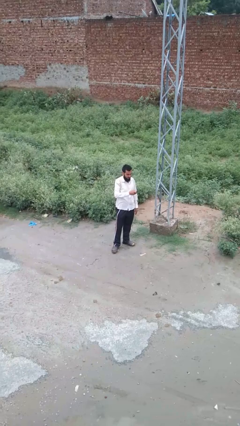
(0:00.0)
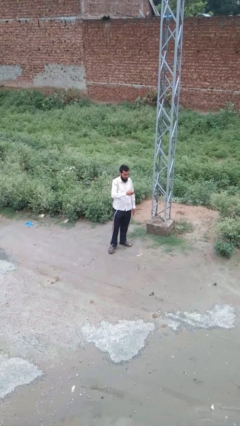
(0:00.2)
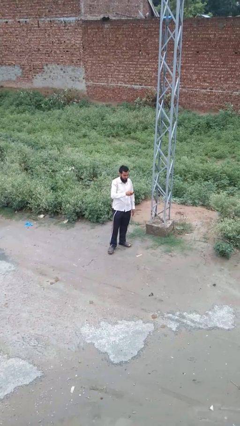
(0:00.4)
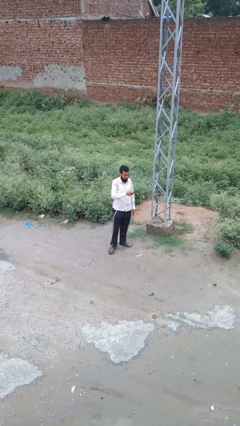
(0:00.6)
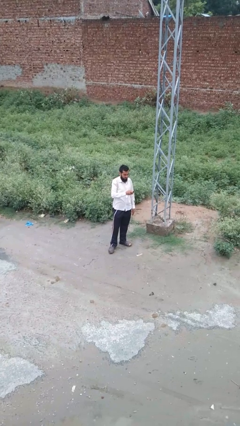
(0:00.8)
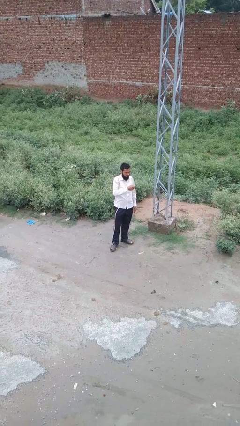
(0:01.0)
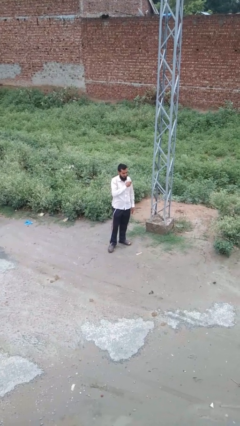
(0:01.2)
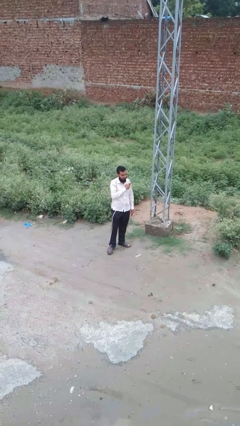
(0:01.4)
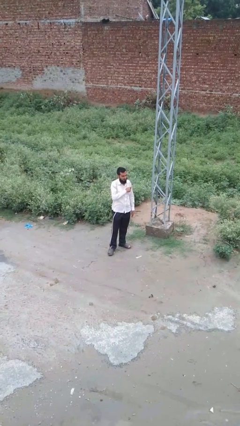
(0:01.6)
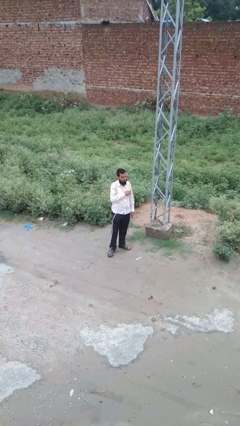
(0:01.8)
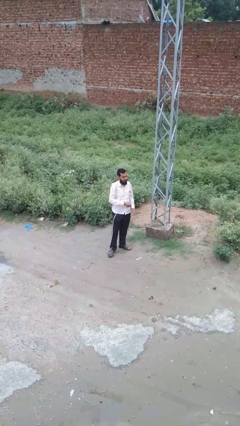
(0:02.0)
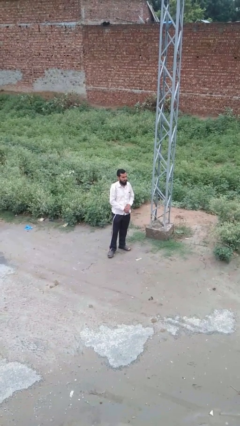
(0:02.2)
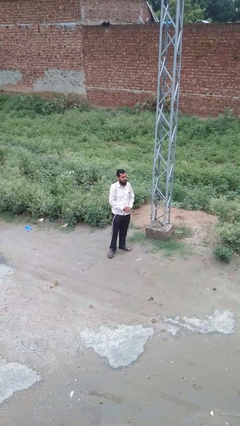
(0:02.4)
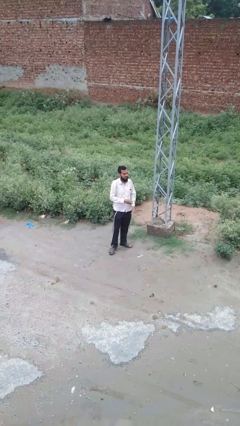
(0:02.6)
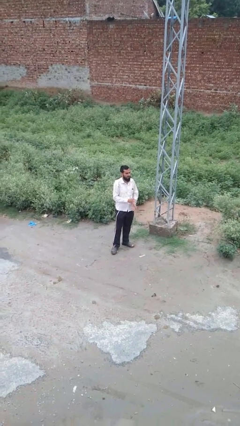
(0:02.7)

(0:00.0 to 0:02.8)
person puts phone into pocket

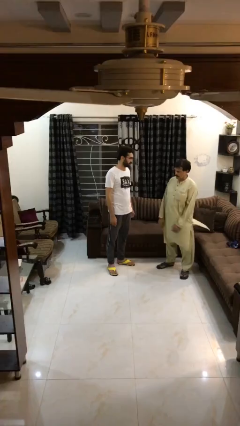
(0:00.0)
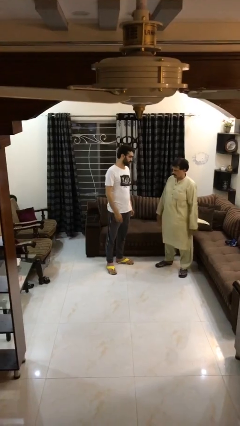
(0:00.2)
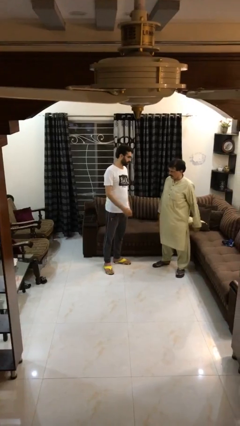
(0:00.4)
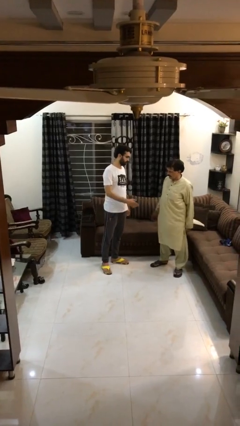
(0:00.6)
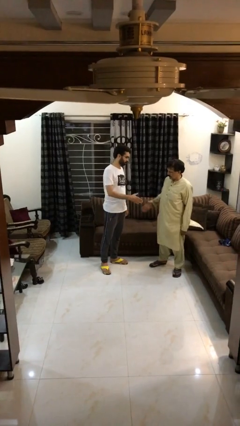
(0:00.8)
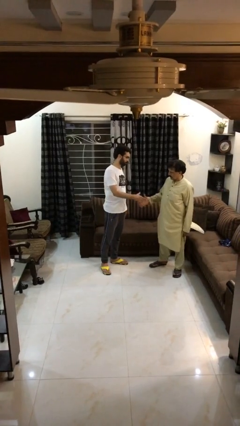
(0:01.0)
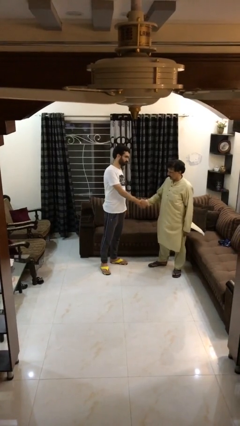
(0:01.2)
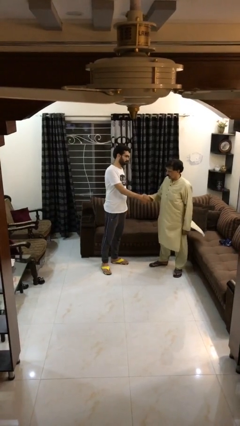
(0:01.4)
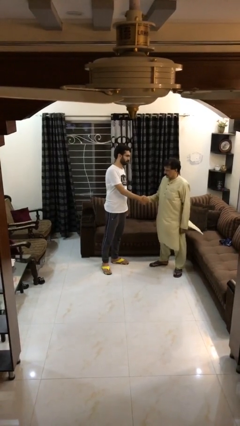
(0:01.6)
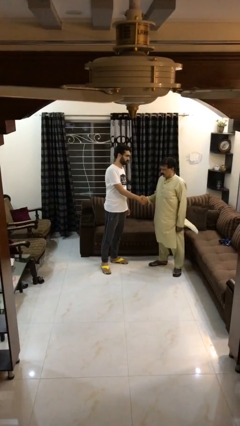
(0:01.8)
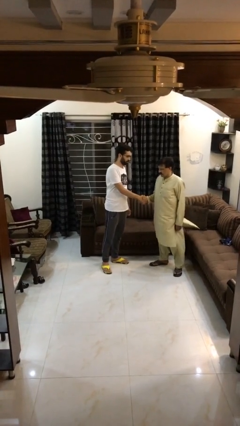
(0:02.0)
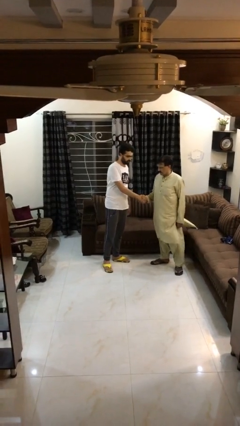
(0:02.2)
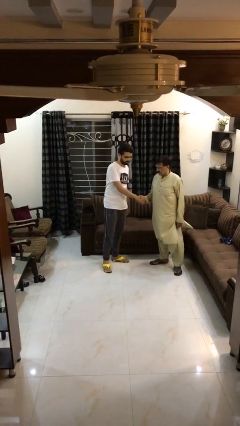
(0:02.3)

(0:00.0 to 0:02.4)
person shakes hand

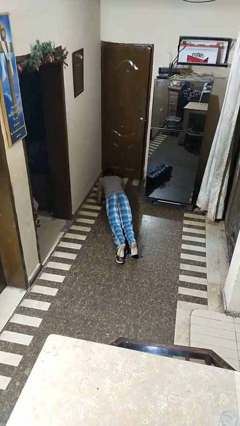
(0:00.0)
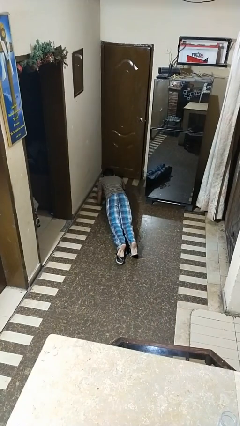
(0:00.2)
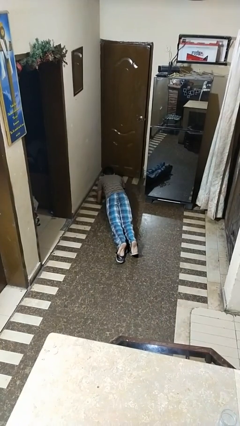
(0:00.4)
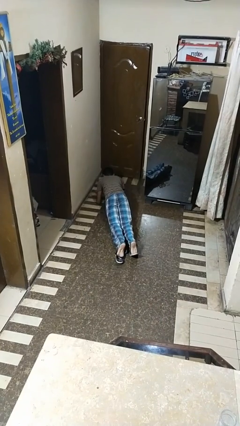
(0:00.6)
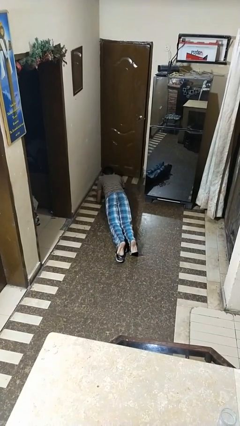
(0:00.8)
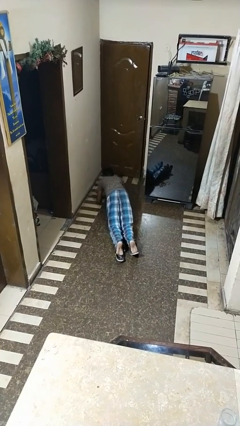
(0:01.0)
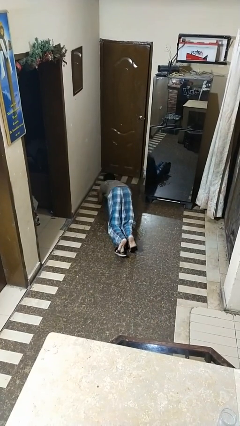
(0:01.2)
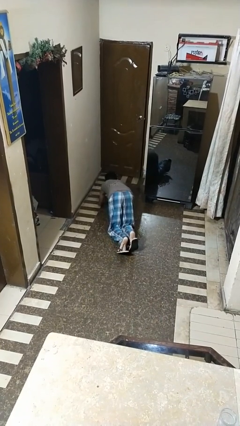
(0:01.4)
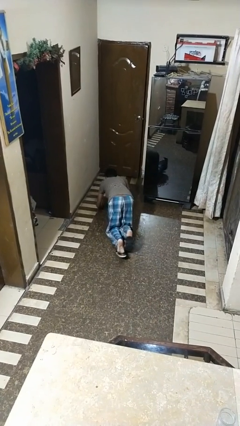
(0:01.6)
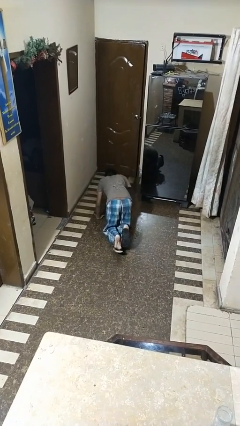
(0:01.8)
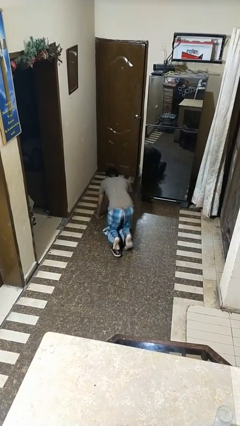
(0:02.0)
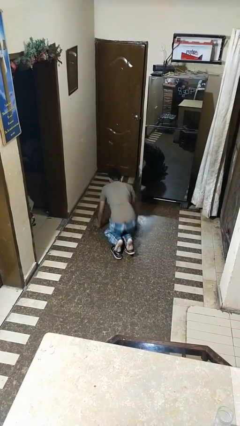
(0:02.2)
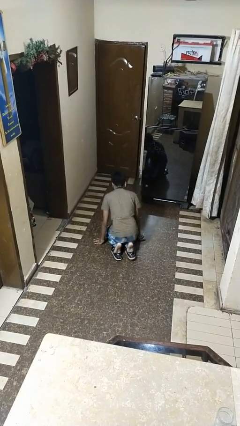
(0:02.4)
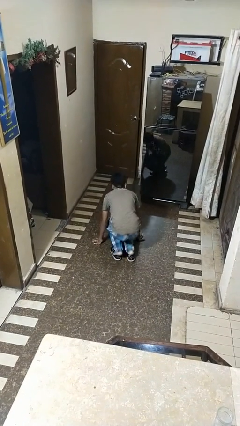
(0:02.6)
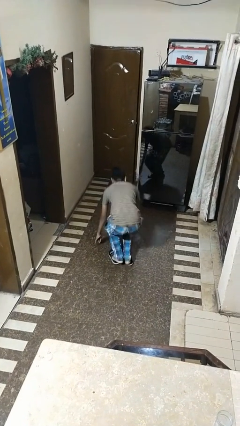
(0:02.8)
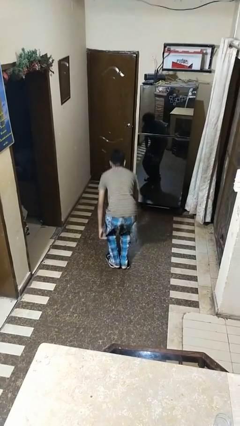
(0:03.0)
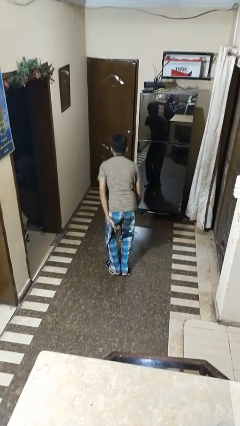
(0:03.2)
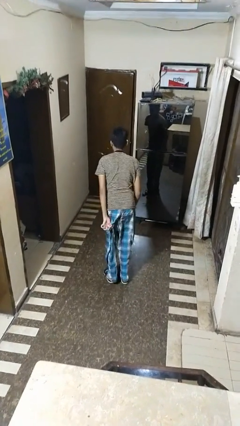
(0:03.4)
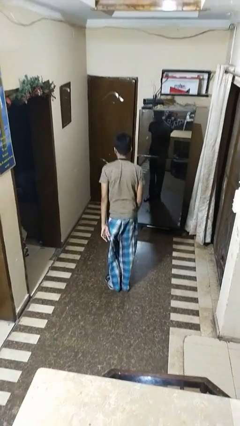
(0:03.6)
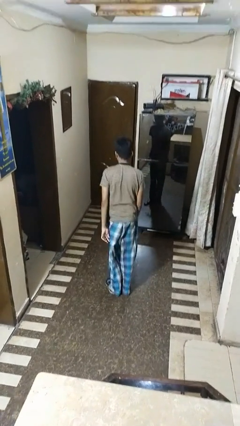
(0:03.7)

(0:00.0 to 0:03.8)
person stands up from floor

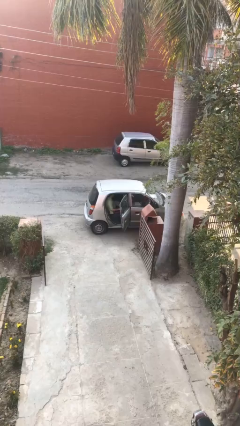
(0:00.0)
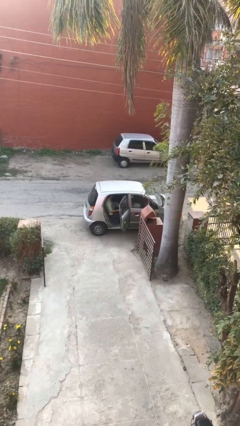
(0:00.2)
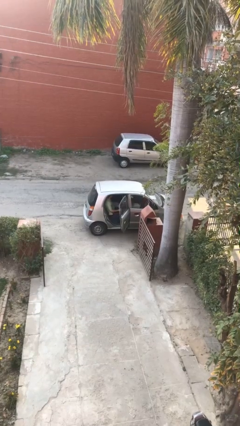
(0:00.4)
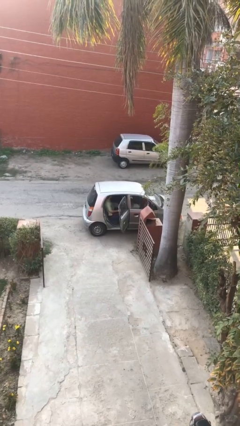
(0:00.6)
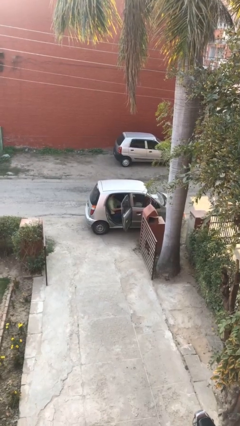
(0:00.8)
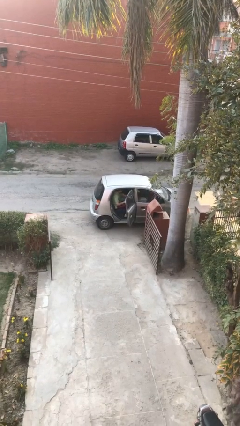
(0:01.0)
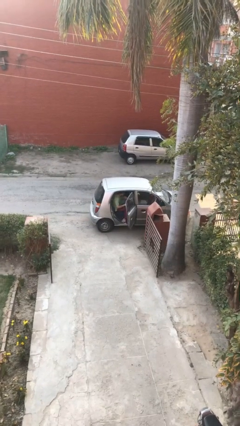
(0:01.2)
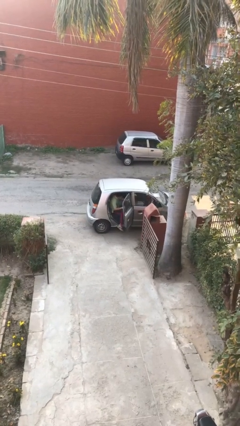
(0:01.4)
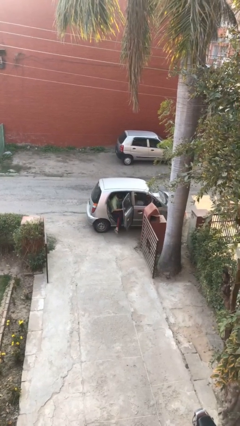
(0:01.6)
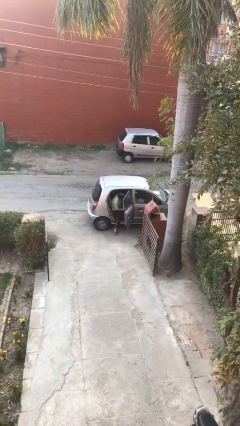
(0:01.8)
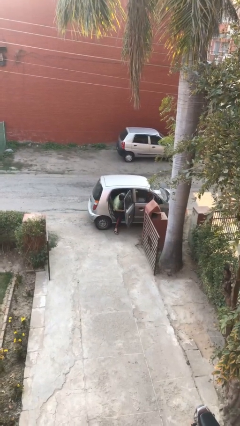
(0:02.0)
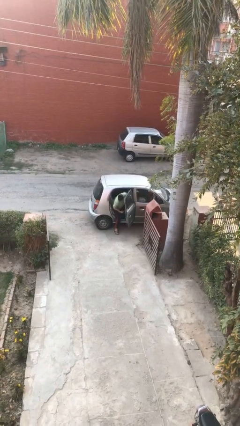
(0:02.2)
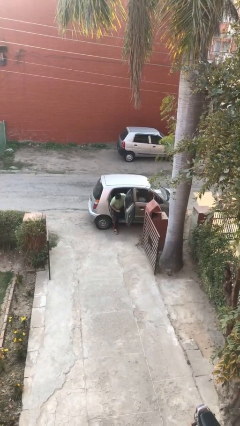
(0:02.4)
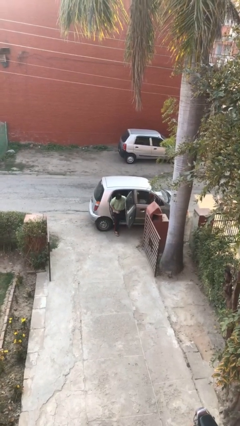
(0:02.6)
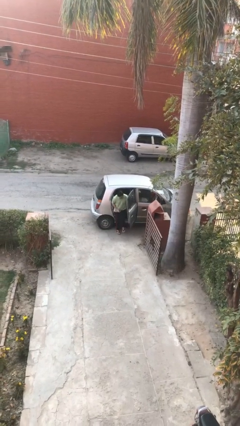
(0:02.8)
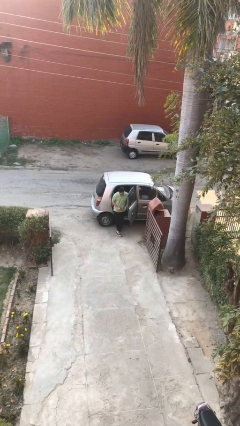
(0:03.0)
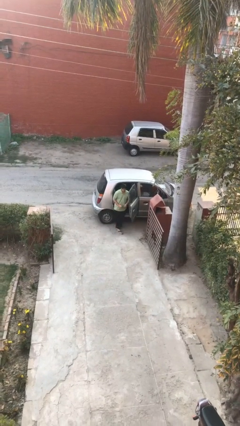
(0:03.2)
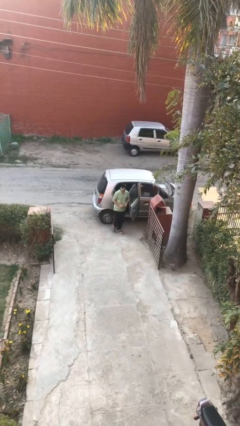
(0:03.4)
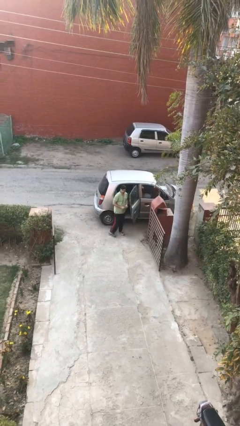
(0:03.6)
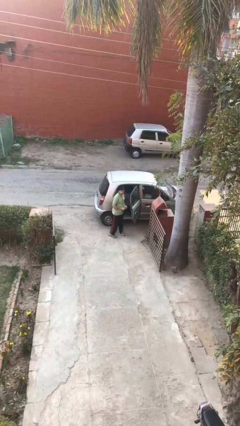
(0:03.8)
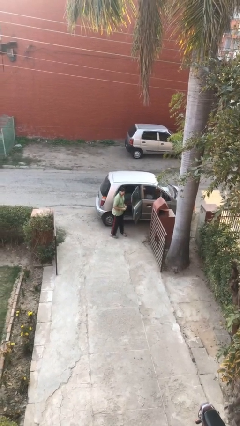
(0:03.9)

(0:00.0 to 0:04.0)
person exits car

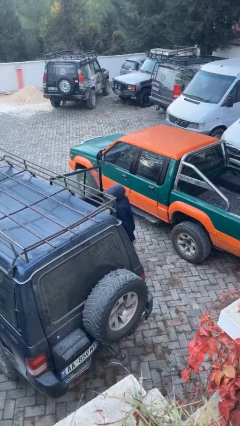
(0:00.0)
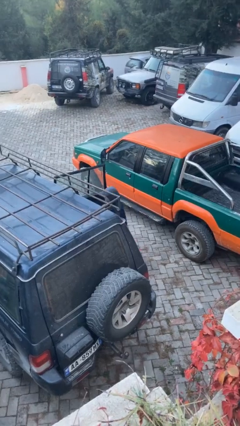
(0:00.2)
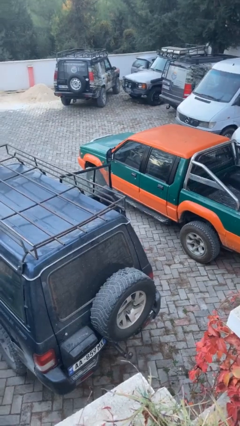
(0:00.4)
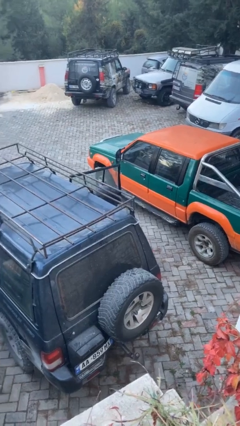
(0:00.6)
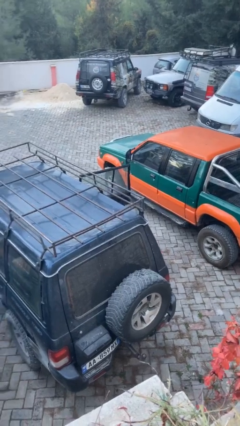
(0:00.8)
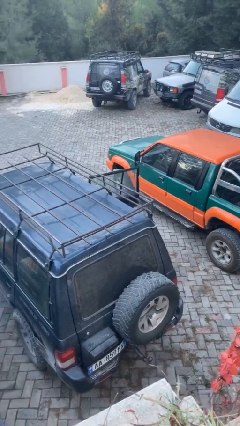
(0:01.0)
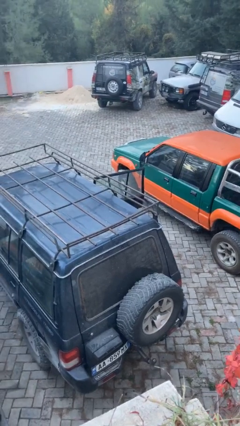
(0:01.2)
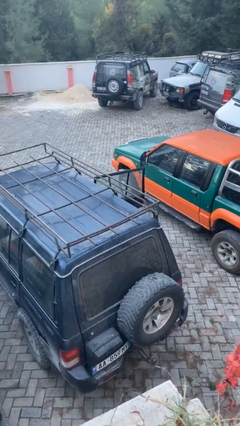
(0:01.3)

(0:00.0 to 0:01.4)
person enters car

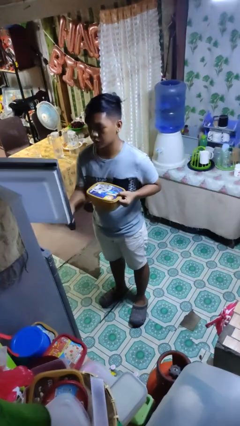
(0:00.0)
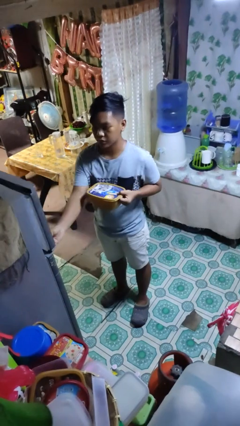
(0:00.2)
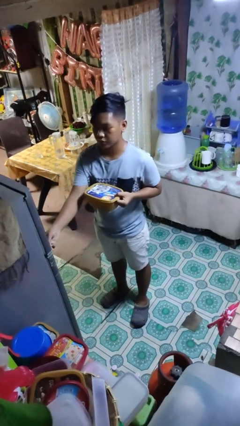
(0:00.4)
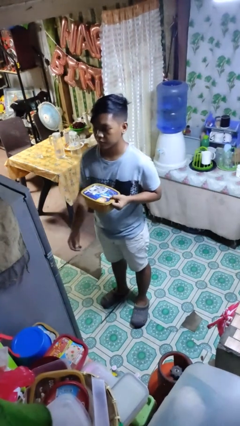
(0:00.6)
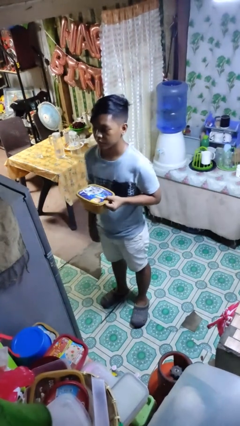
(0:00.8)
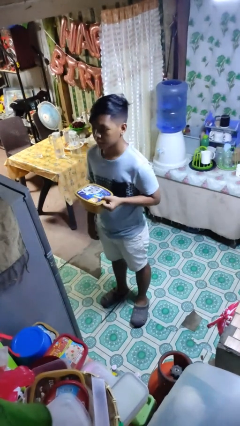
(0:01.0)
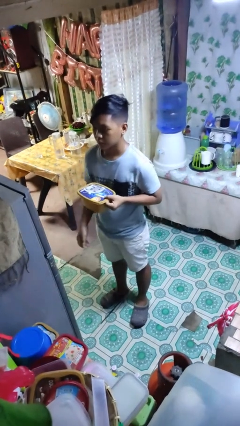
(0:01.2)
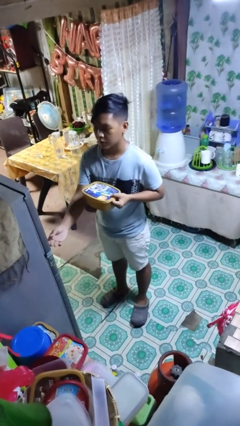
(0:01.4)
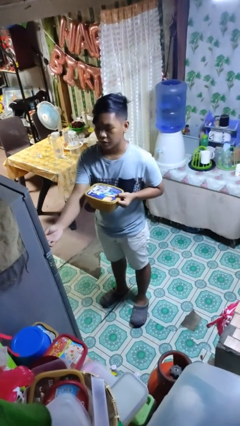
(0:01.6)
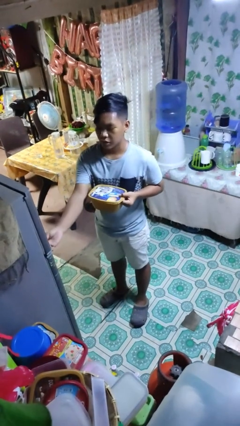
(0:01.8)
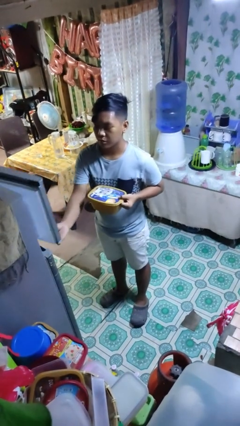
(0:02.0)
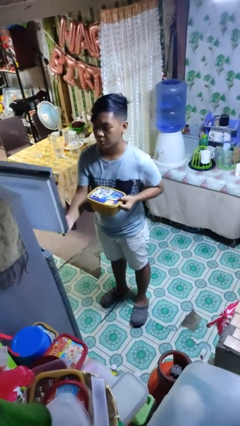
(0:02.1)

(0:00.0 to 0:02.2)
person closes refrigerator

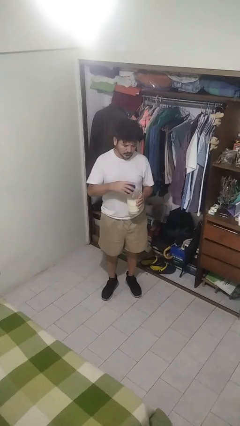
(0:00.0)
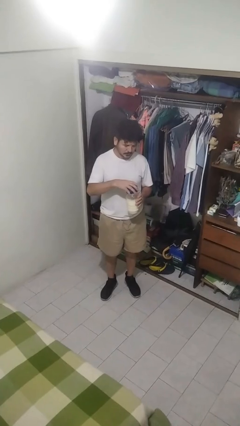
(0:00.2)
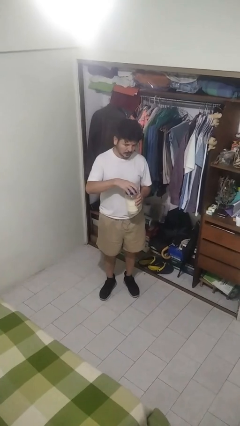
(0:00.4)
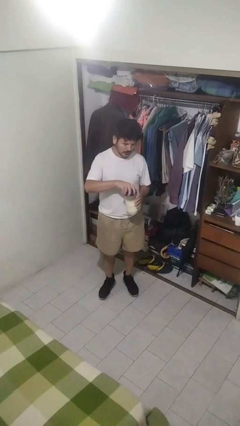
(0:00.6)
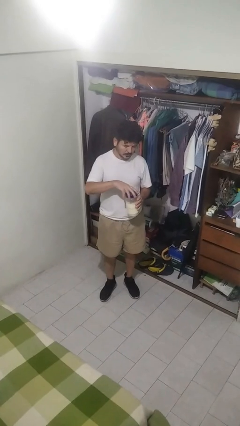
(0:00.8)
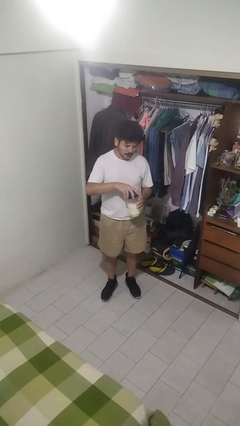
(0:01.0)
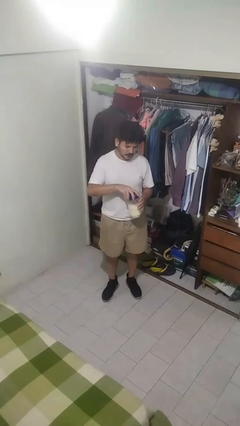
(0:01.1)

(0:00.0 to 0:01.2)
person closes jar
